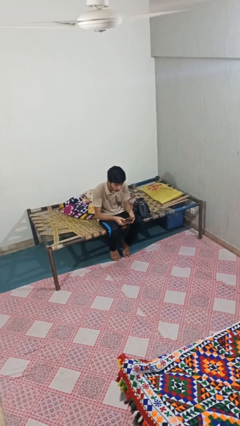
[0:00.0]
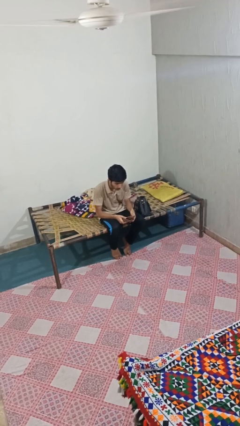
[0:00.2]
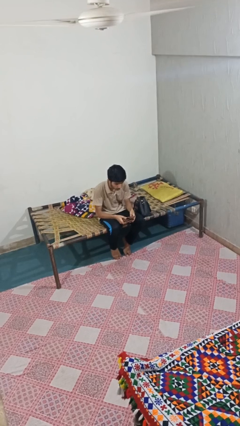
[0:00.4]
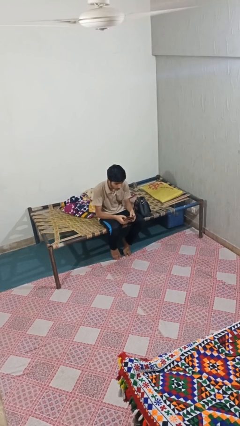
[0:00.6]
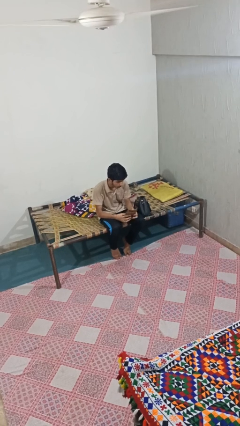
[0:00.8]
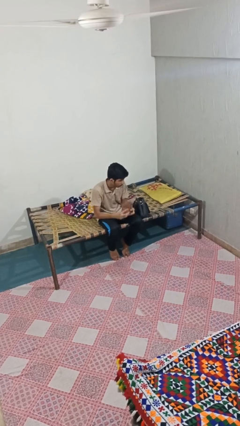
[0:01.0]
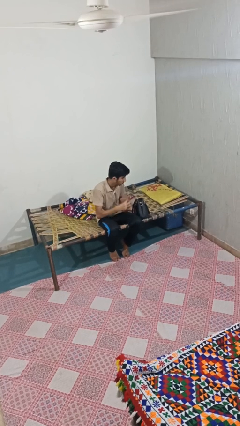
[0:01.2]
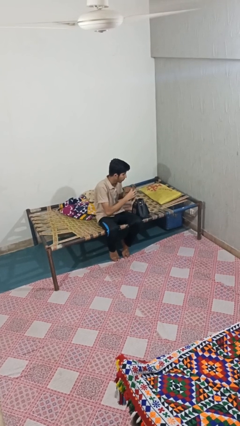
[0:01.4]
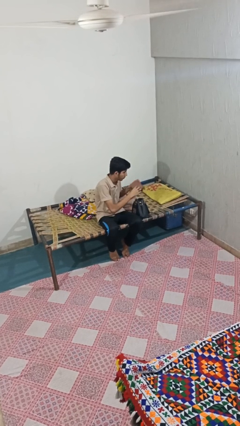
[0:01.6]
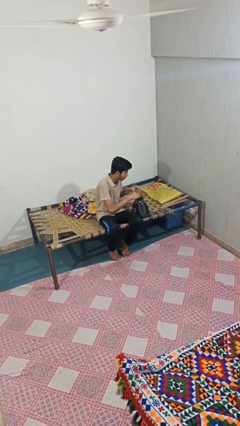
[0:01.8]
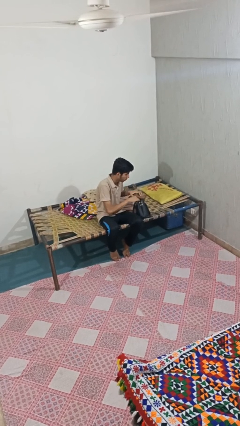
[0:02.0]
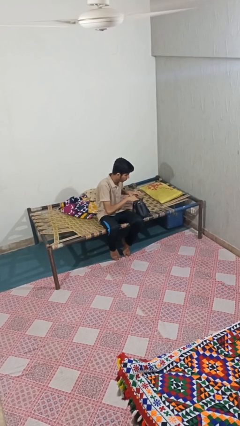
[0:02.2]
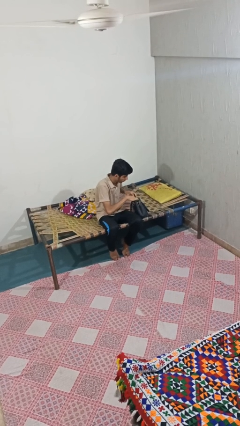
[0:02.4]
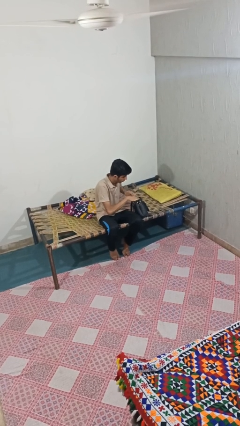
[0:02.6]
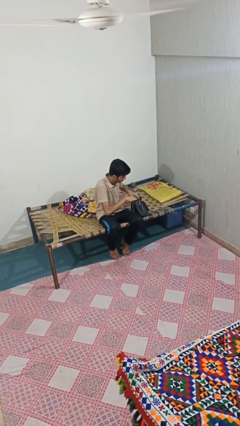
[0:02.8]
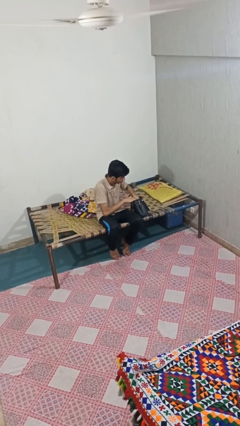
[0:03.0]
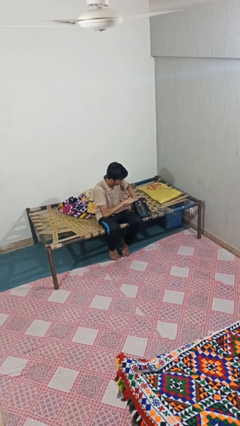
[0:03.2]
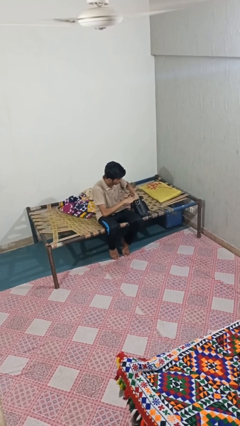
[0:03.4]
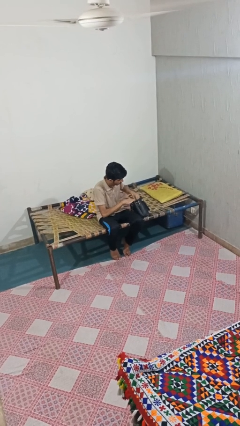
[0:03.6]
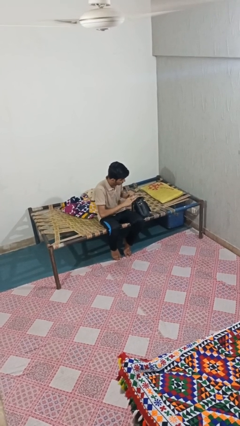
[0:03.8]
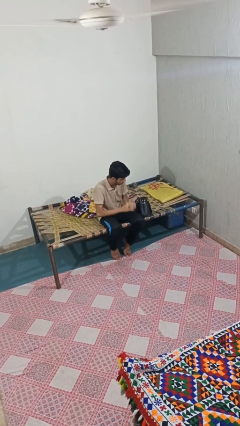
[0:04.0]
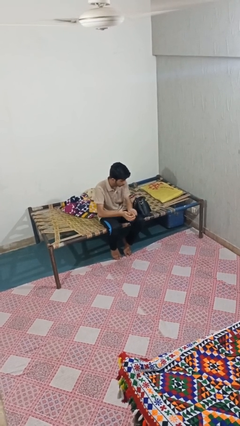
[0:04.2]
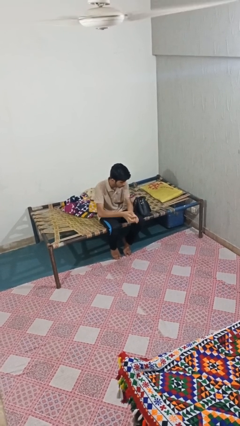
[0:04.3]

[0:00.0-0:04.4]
person puts object into purse

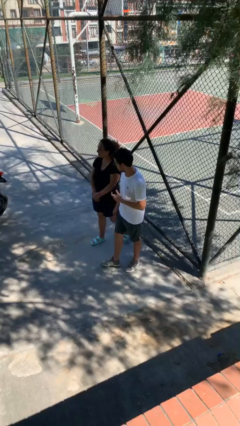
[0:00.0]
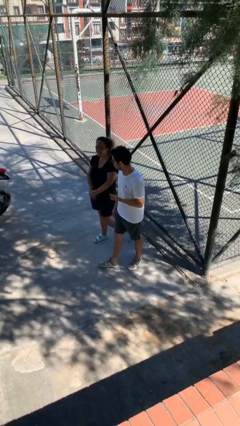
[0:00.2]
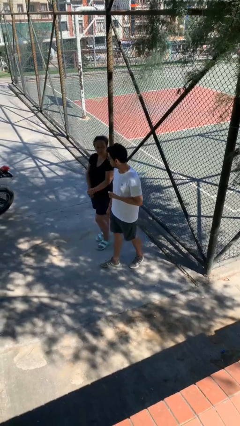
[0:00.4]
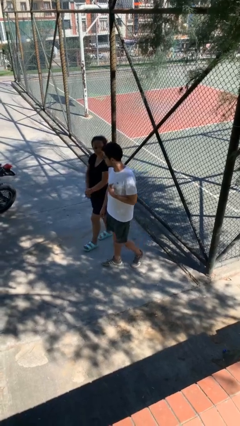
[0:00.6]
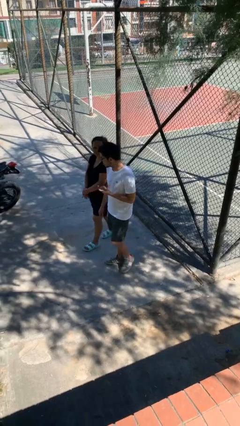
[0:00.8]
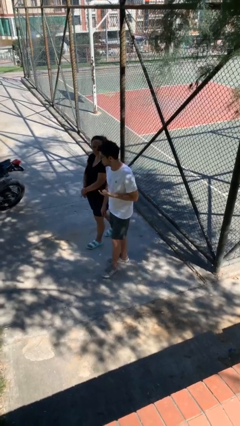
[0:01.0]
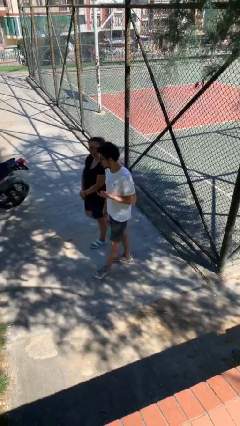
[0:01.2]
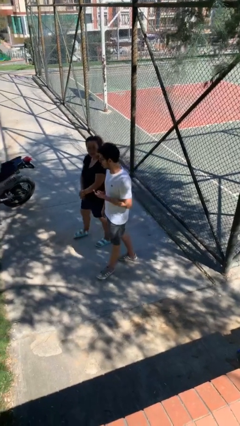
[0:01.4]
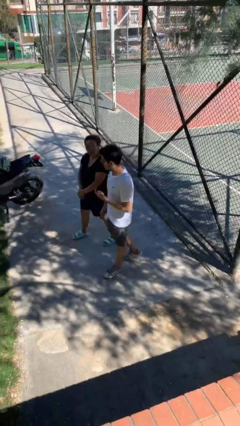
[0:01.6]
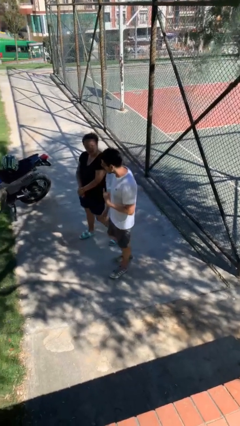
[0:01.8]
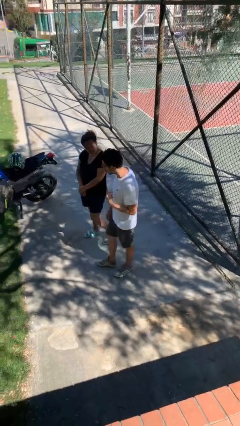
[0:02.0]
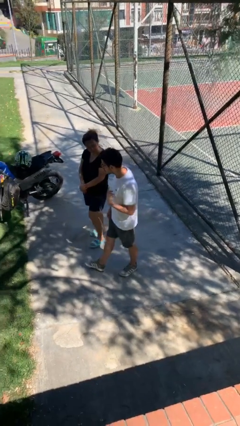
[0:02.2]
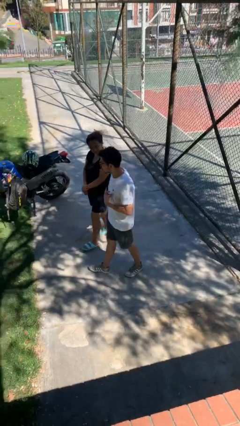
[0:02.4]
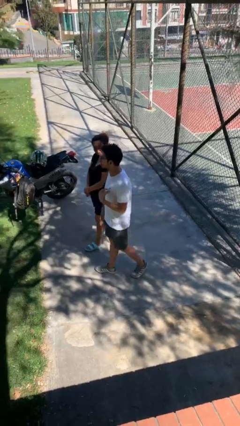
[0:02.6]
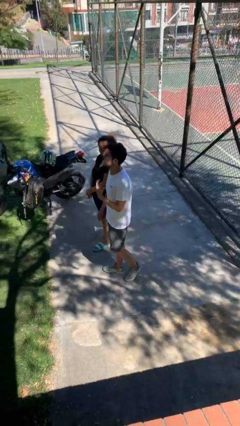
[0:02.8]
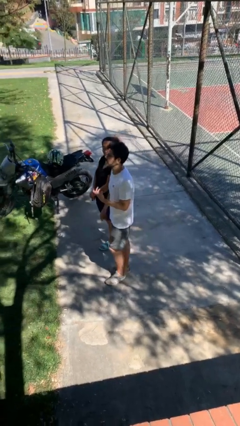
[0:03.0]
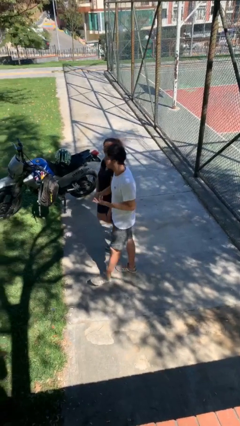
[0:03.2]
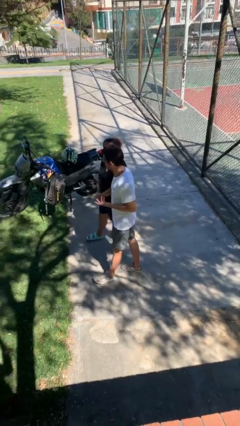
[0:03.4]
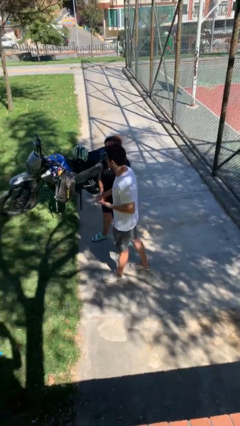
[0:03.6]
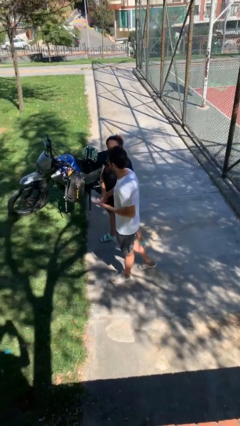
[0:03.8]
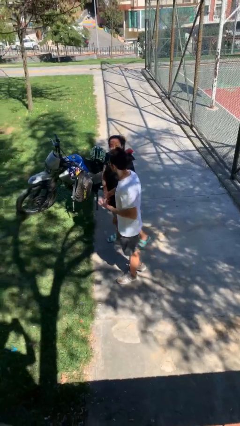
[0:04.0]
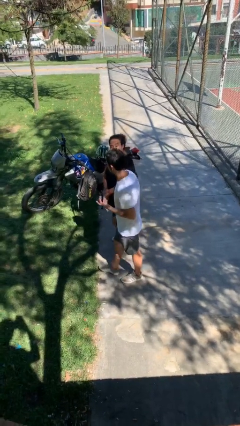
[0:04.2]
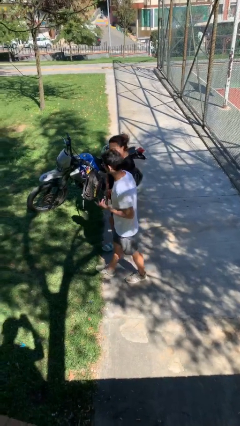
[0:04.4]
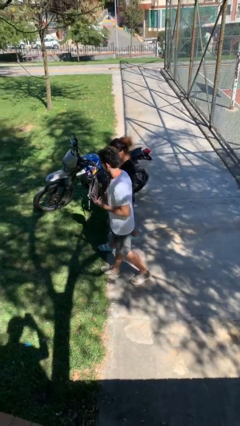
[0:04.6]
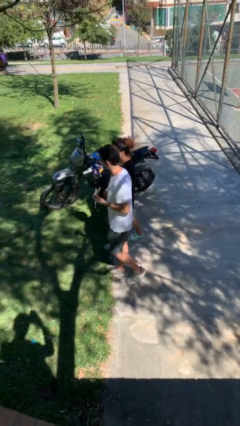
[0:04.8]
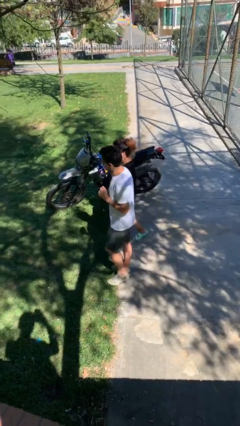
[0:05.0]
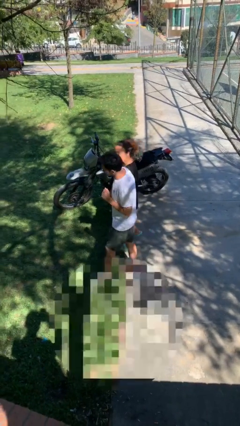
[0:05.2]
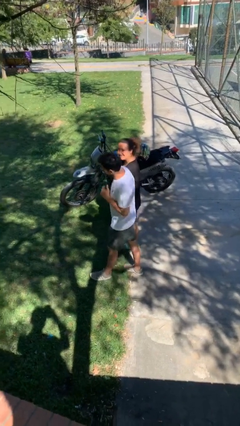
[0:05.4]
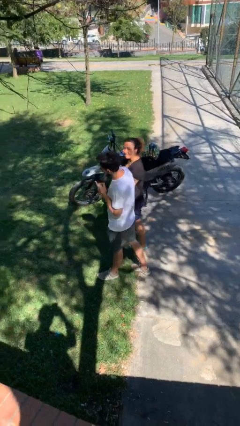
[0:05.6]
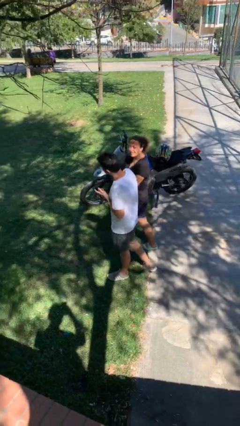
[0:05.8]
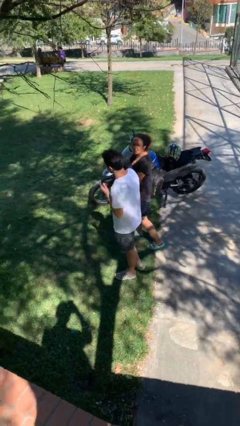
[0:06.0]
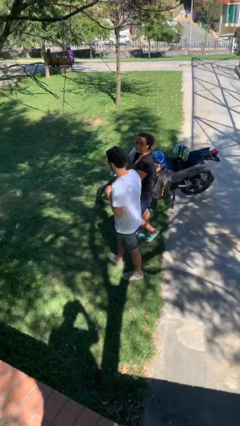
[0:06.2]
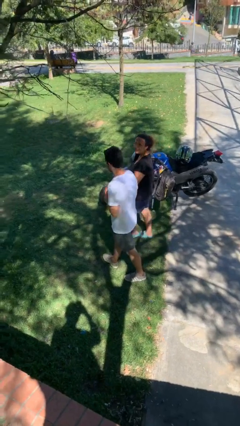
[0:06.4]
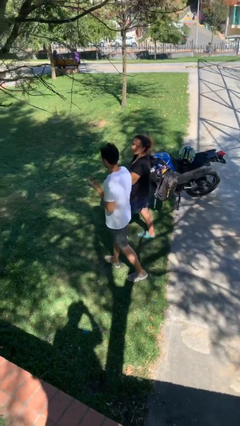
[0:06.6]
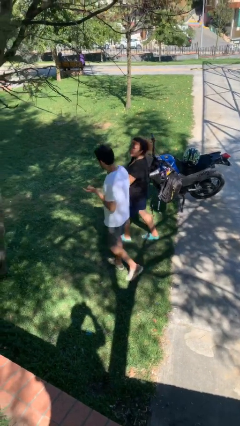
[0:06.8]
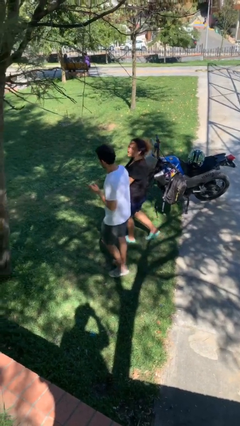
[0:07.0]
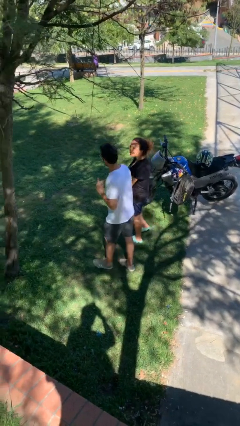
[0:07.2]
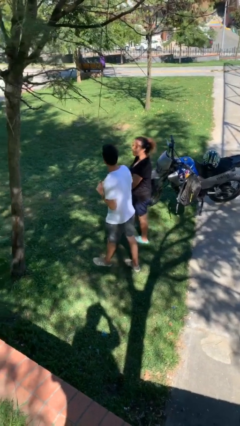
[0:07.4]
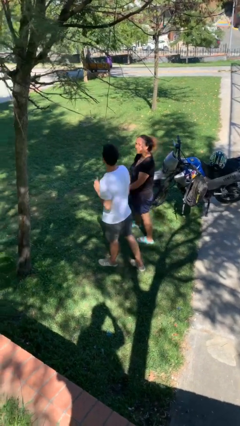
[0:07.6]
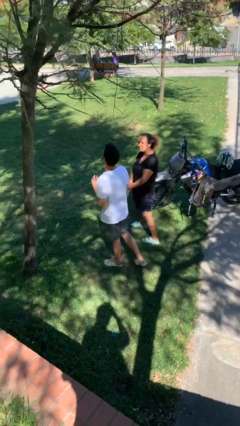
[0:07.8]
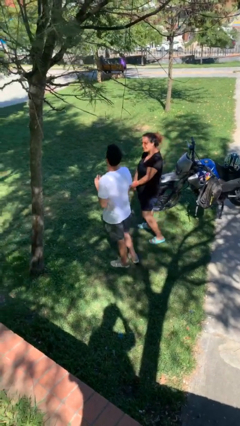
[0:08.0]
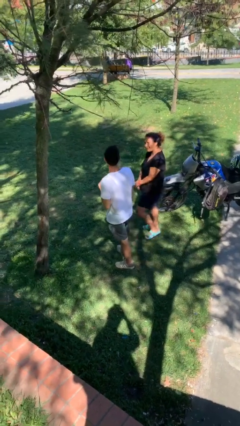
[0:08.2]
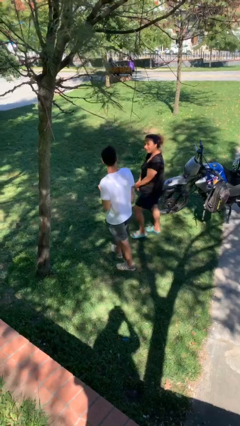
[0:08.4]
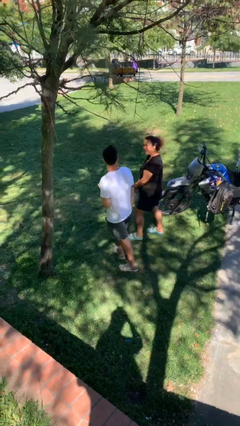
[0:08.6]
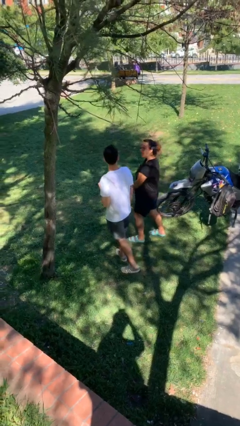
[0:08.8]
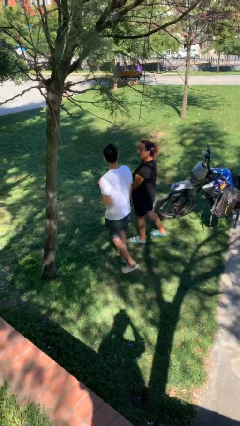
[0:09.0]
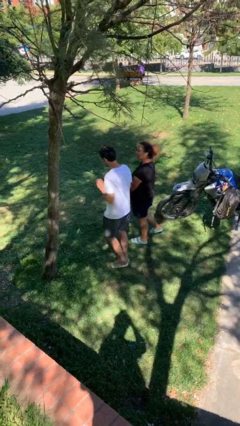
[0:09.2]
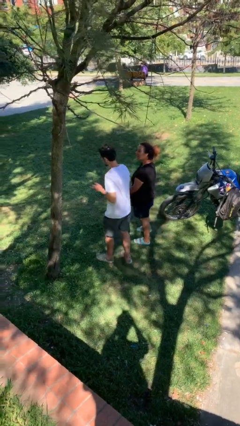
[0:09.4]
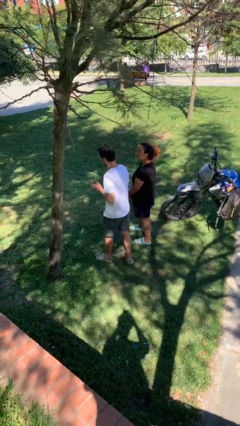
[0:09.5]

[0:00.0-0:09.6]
person talks to person

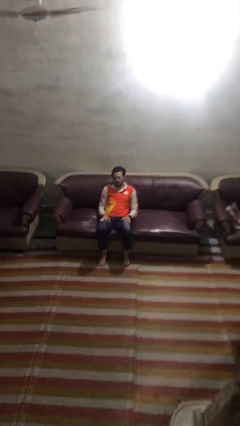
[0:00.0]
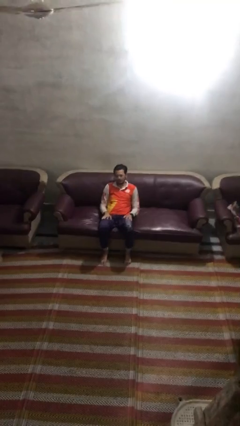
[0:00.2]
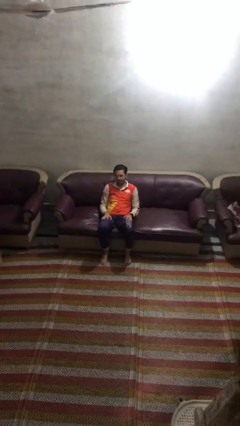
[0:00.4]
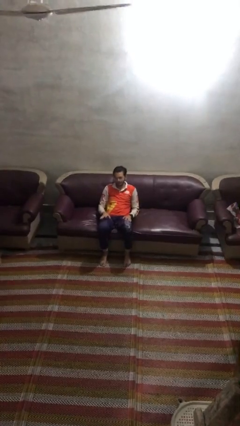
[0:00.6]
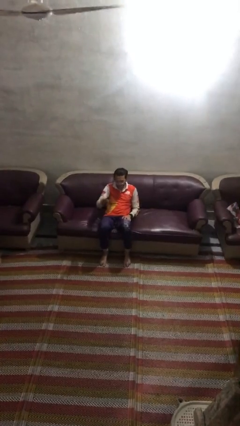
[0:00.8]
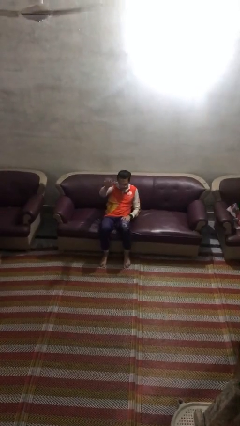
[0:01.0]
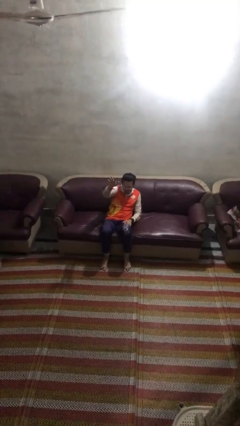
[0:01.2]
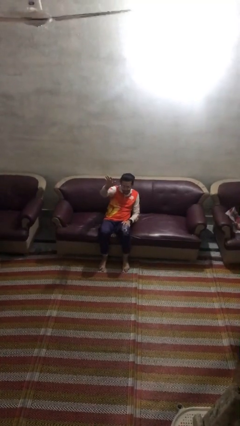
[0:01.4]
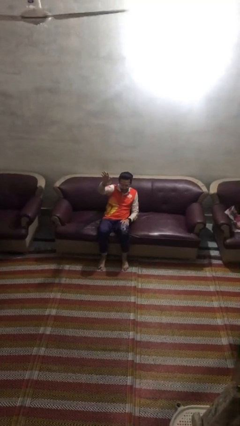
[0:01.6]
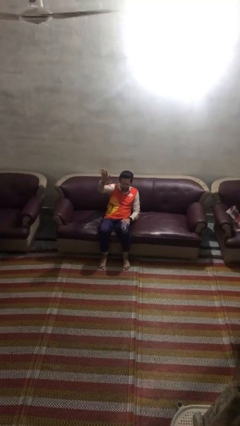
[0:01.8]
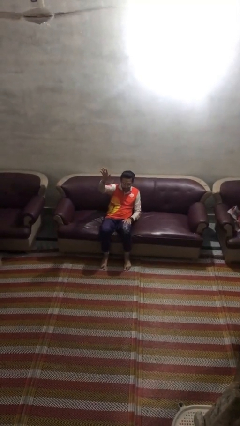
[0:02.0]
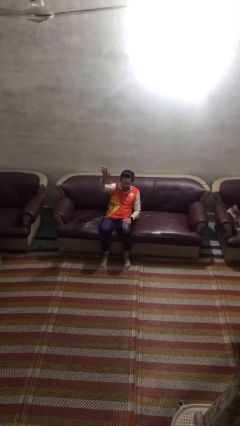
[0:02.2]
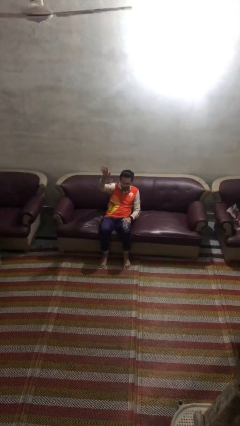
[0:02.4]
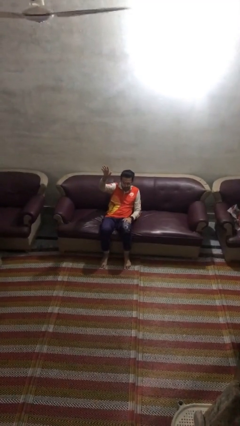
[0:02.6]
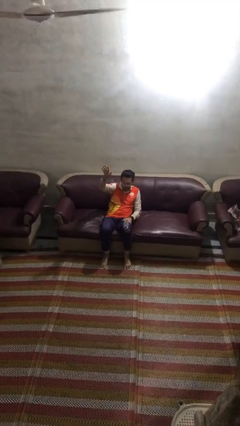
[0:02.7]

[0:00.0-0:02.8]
person gestures raise hand

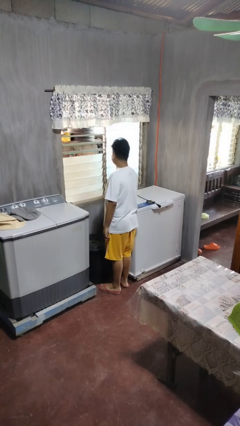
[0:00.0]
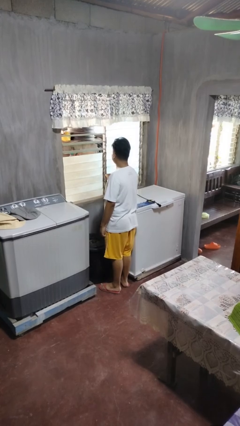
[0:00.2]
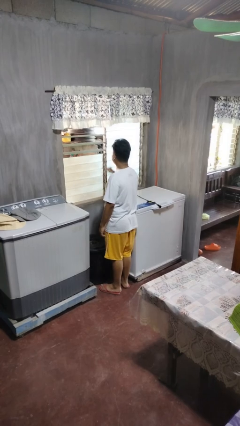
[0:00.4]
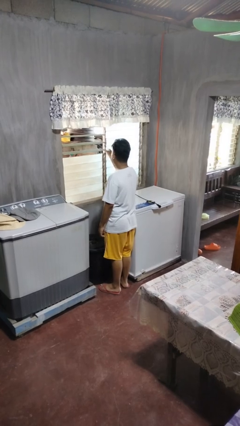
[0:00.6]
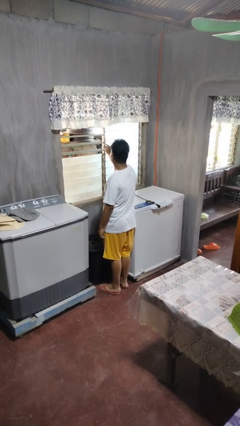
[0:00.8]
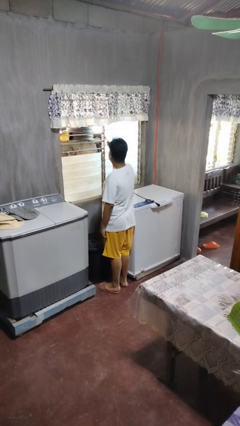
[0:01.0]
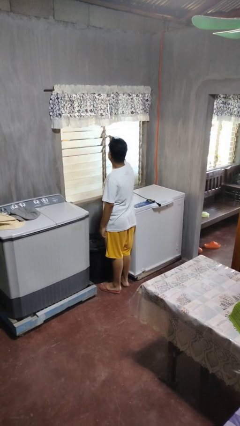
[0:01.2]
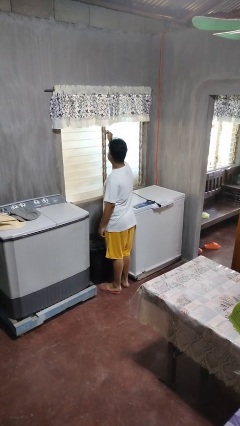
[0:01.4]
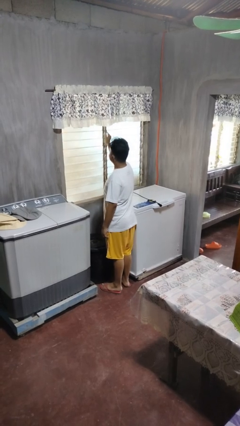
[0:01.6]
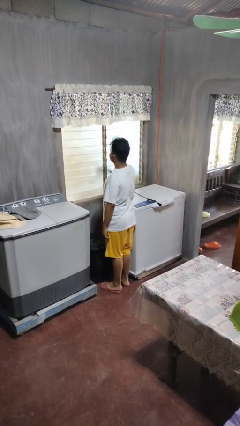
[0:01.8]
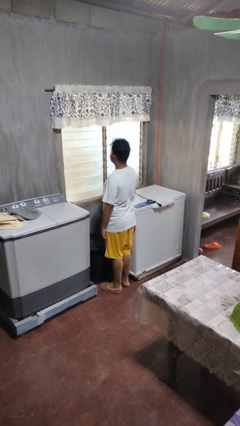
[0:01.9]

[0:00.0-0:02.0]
person closes home window
